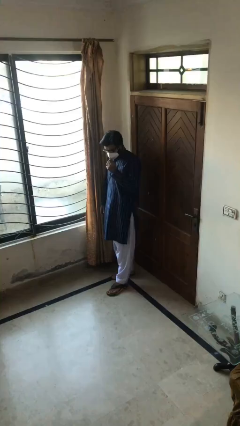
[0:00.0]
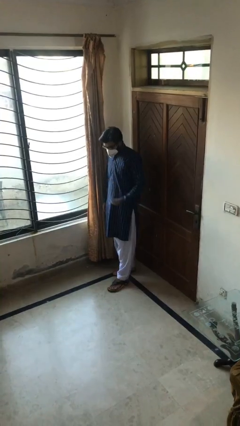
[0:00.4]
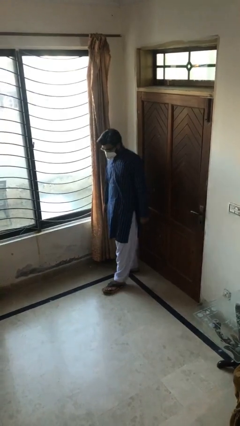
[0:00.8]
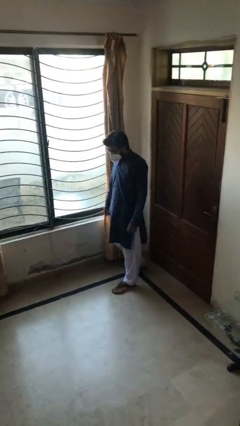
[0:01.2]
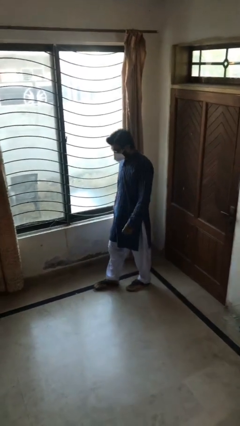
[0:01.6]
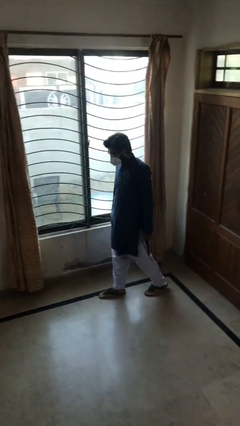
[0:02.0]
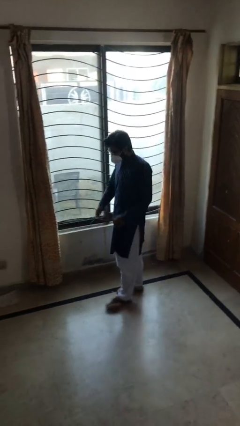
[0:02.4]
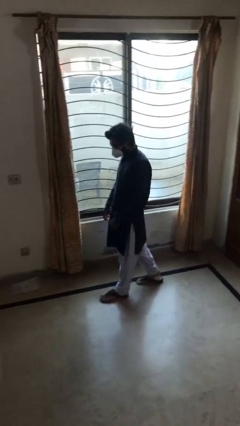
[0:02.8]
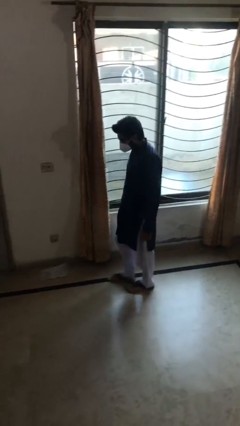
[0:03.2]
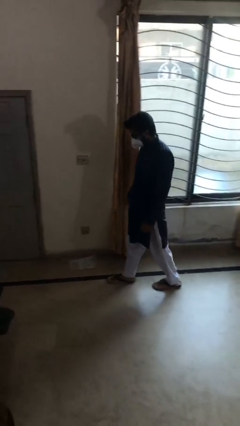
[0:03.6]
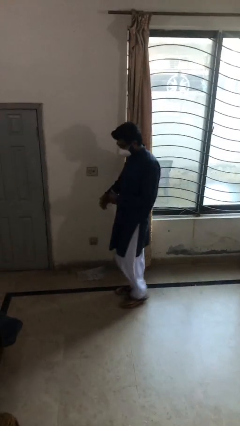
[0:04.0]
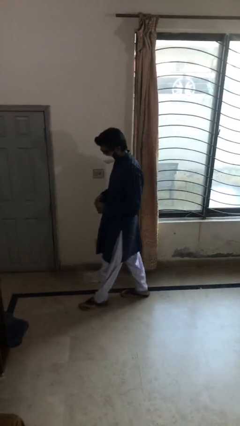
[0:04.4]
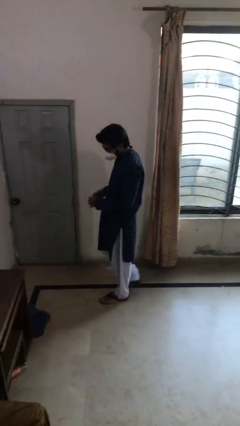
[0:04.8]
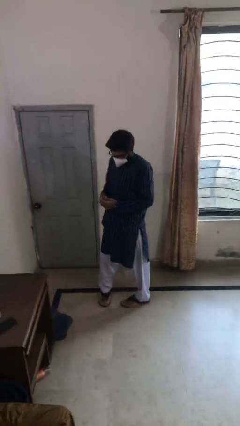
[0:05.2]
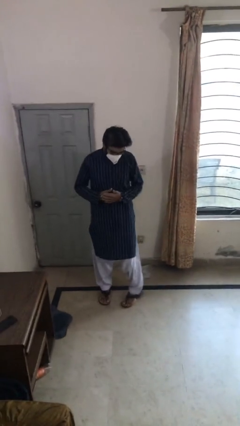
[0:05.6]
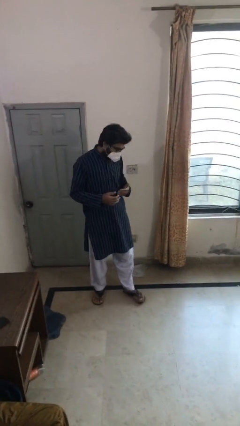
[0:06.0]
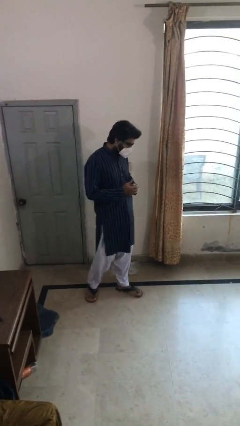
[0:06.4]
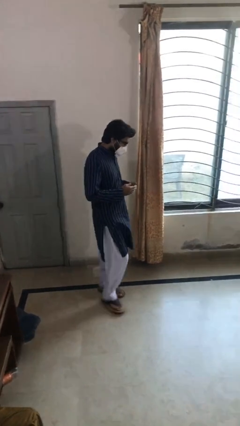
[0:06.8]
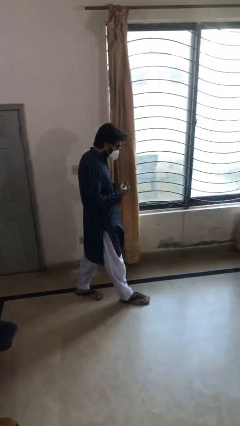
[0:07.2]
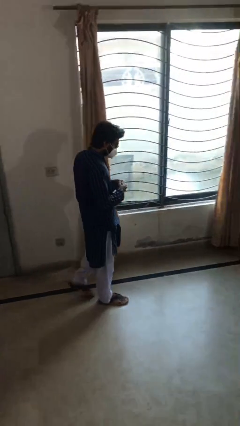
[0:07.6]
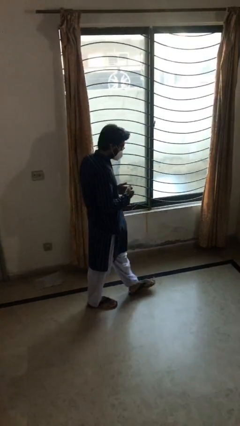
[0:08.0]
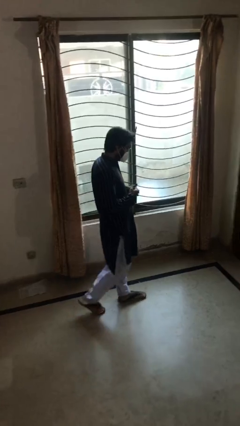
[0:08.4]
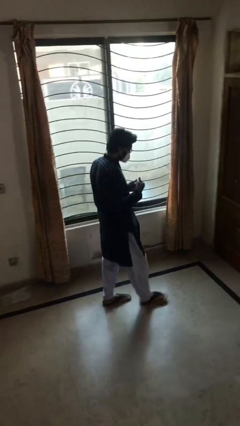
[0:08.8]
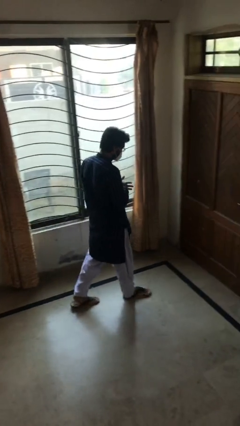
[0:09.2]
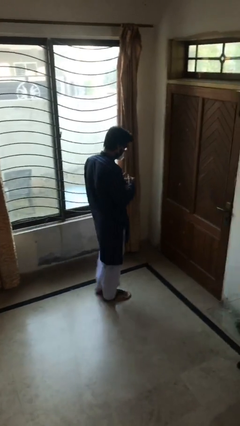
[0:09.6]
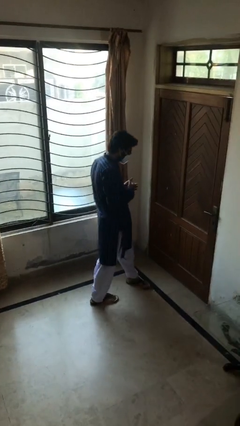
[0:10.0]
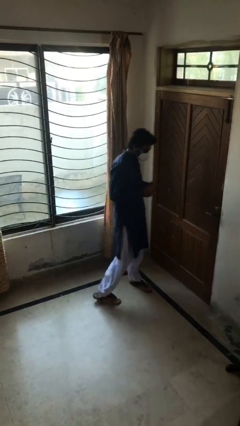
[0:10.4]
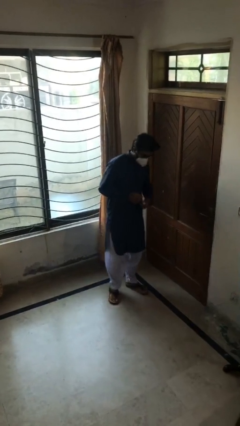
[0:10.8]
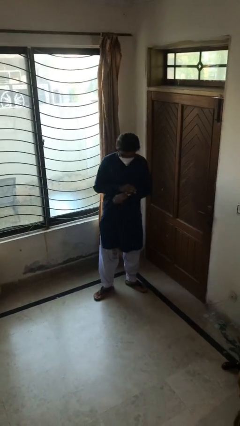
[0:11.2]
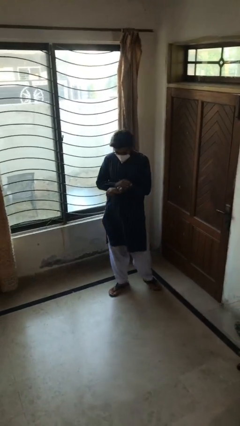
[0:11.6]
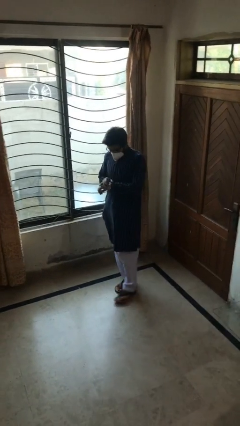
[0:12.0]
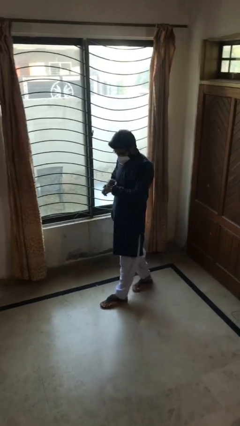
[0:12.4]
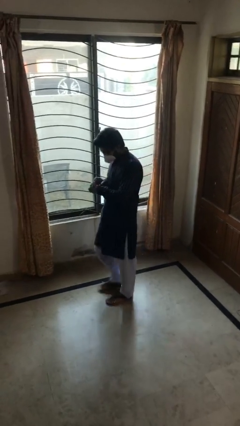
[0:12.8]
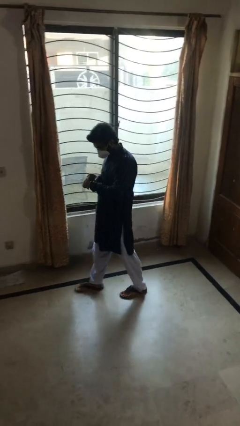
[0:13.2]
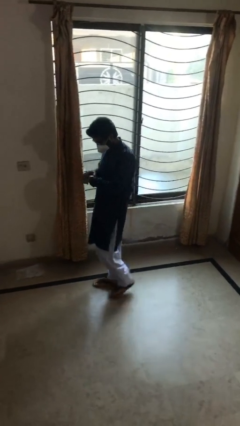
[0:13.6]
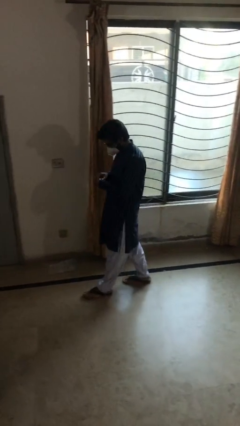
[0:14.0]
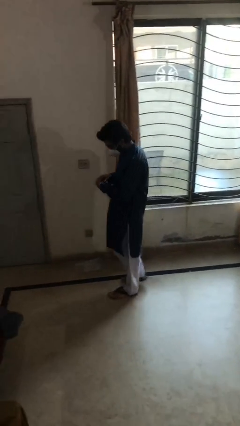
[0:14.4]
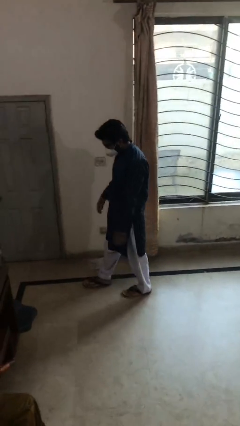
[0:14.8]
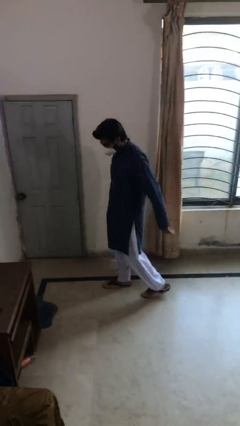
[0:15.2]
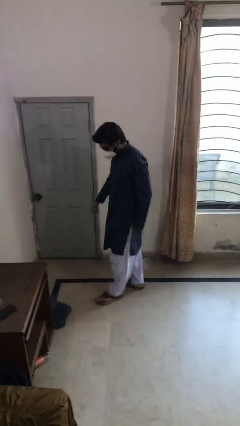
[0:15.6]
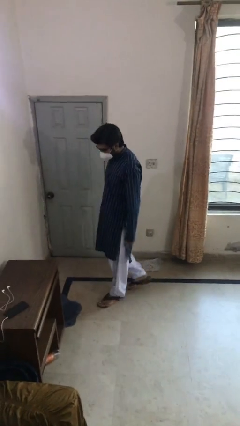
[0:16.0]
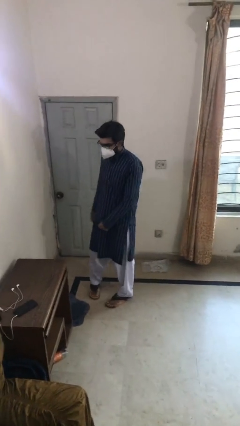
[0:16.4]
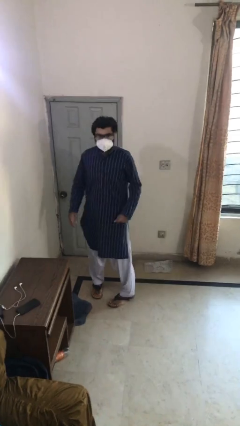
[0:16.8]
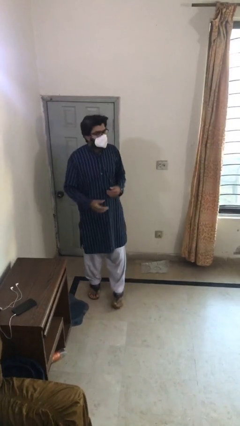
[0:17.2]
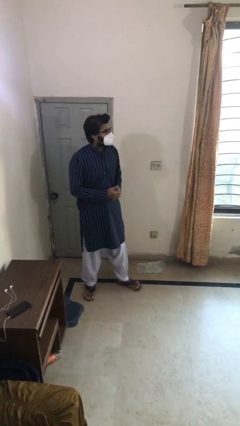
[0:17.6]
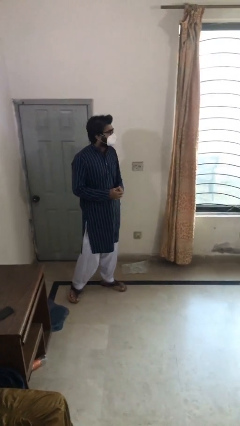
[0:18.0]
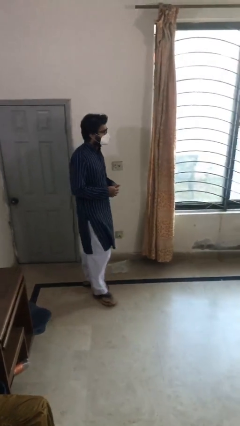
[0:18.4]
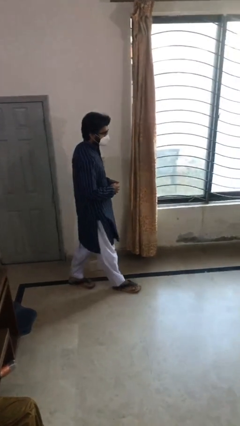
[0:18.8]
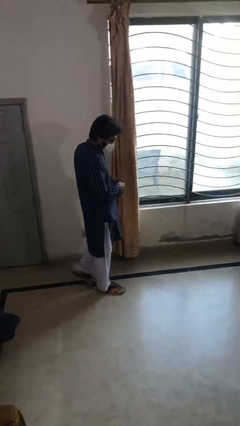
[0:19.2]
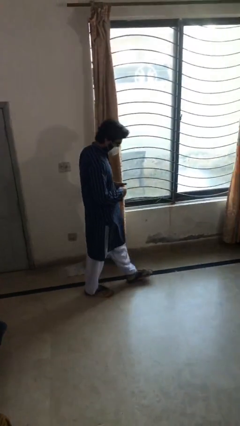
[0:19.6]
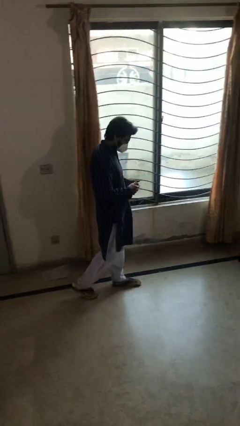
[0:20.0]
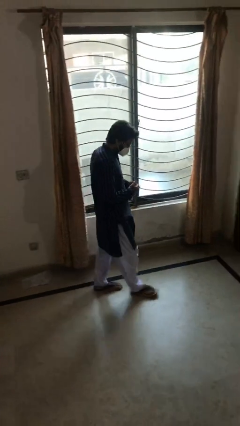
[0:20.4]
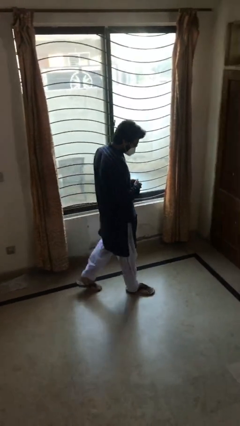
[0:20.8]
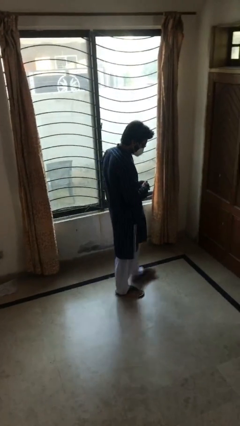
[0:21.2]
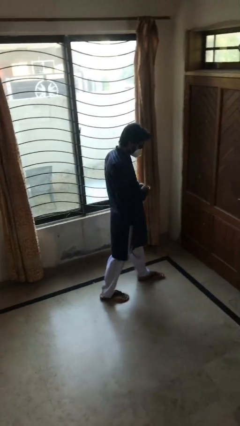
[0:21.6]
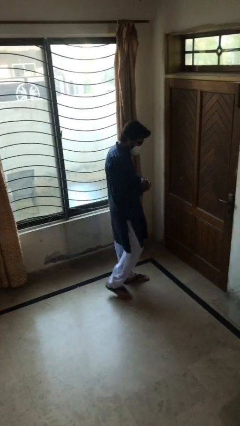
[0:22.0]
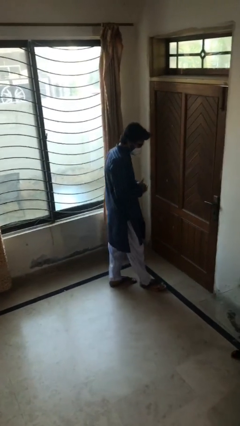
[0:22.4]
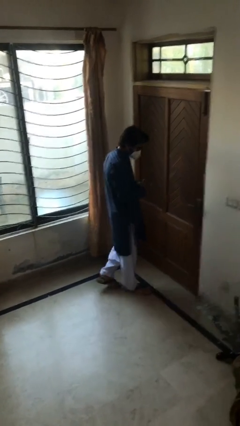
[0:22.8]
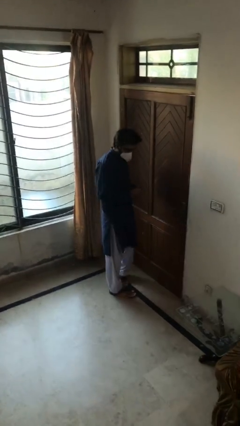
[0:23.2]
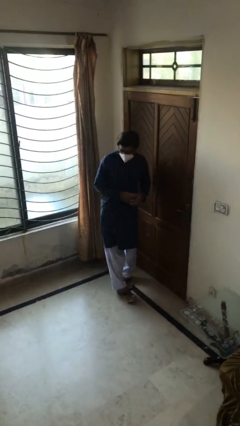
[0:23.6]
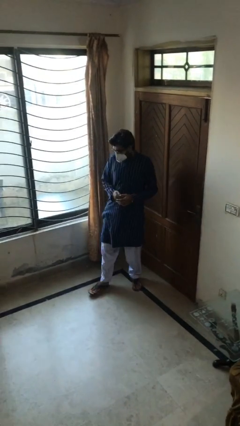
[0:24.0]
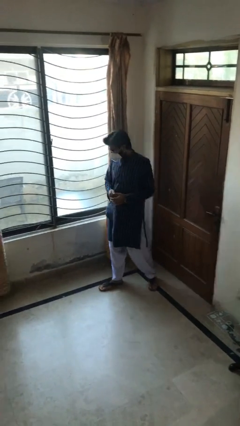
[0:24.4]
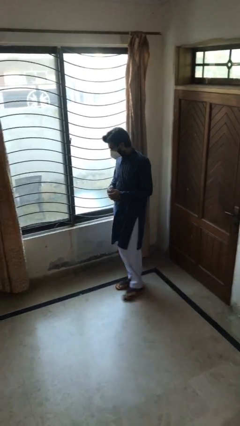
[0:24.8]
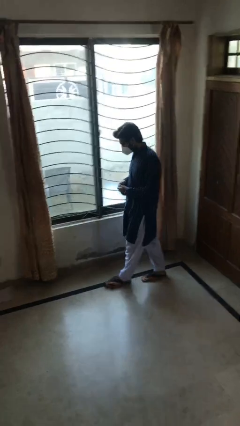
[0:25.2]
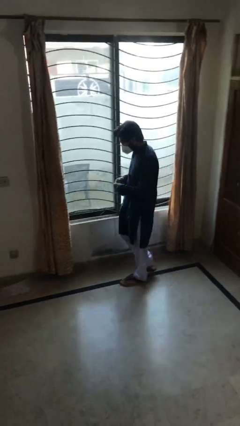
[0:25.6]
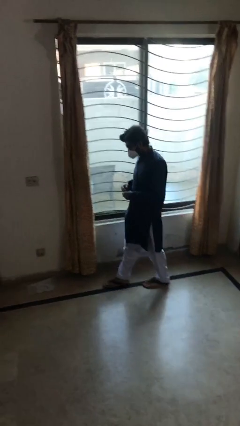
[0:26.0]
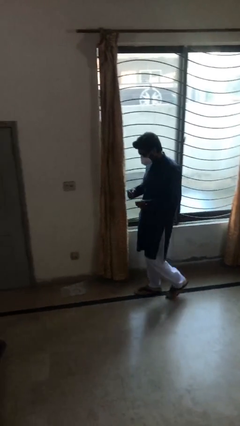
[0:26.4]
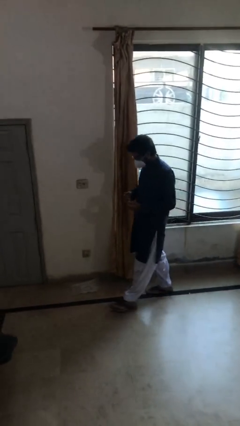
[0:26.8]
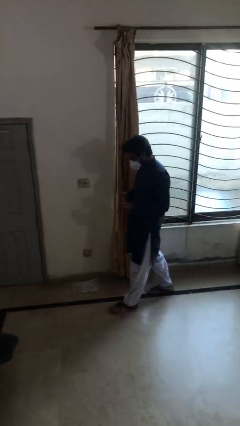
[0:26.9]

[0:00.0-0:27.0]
person walks

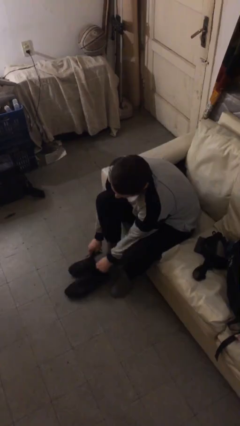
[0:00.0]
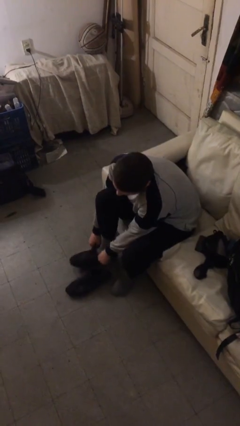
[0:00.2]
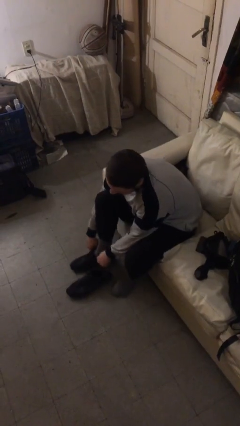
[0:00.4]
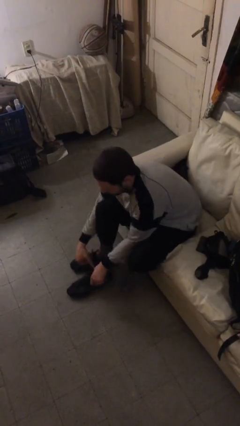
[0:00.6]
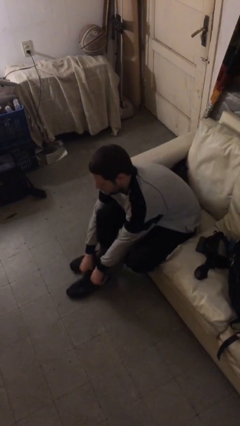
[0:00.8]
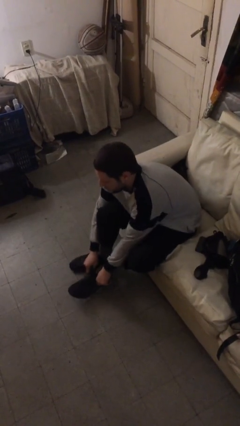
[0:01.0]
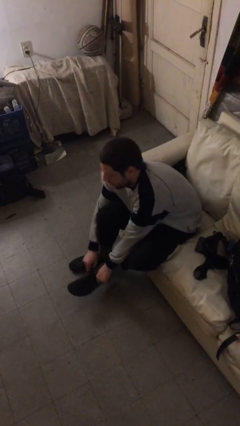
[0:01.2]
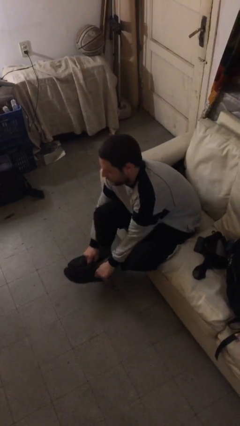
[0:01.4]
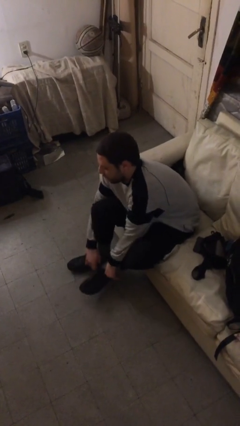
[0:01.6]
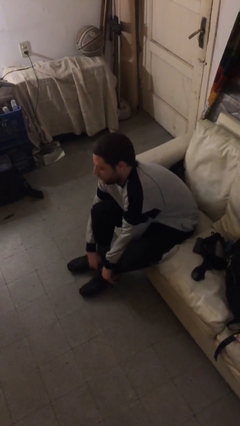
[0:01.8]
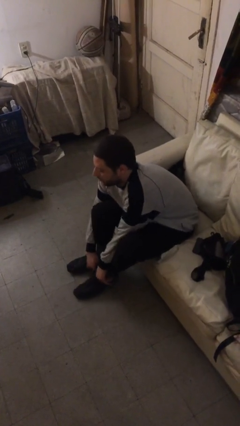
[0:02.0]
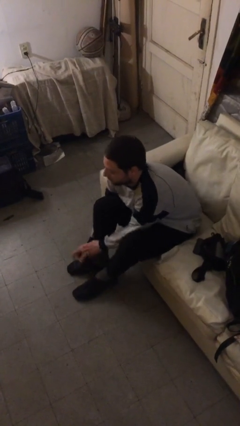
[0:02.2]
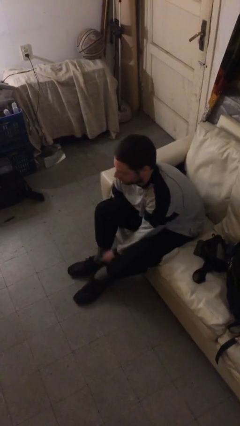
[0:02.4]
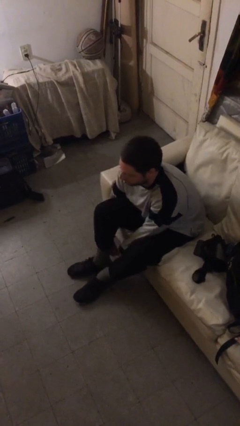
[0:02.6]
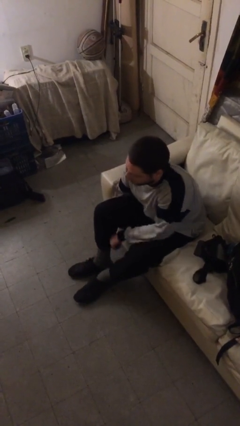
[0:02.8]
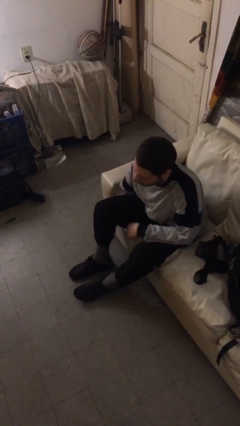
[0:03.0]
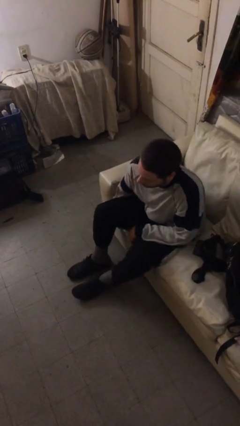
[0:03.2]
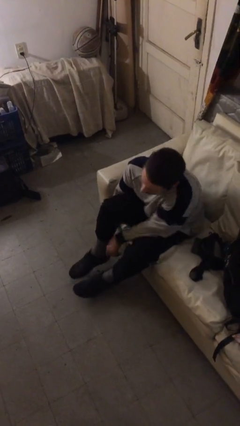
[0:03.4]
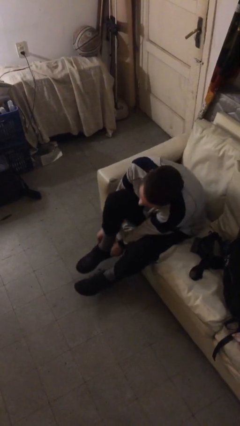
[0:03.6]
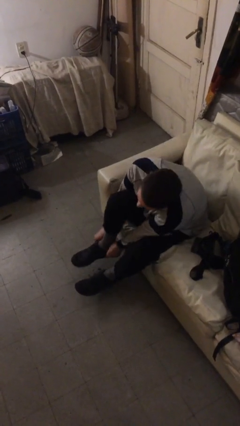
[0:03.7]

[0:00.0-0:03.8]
person puts on shoes

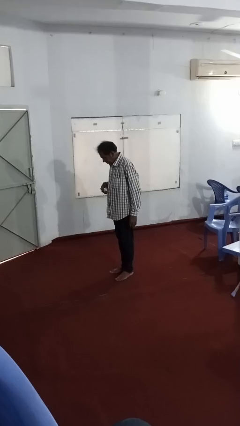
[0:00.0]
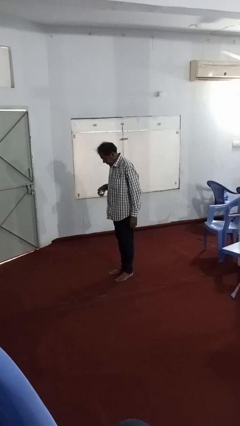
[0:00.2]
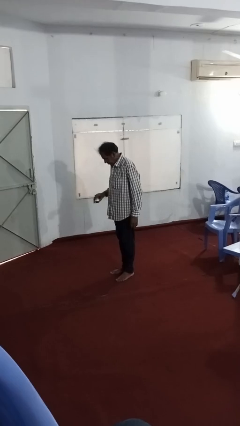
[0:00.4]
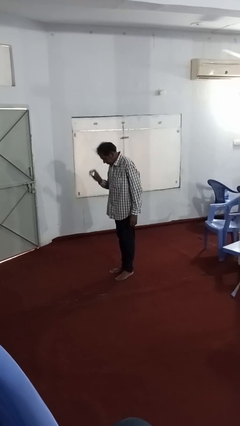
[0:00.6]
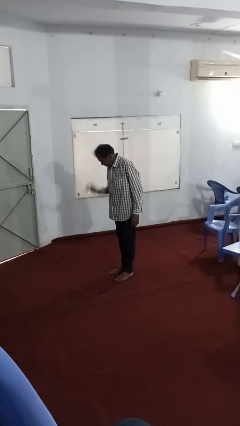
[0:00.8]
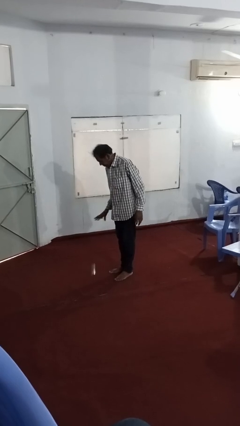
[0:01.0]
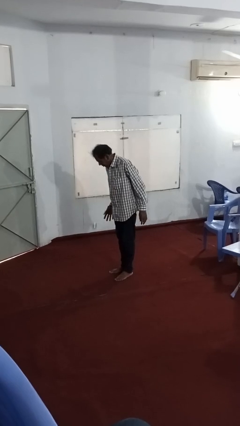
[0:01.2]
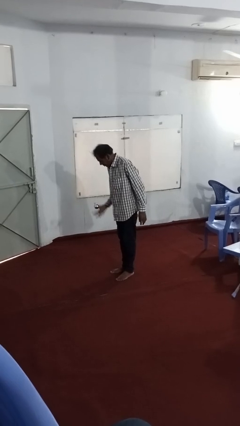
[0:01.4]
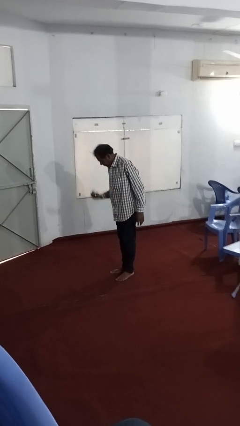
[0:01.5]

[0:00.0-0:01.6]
person bounces ball on floor
